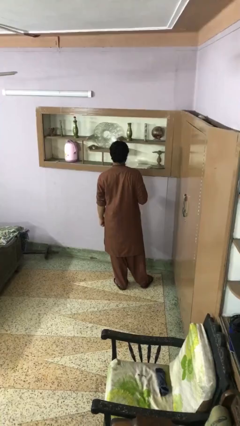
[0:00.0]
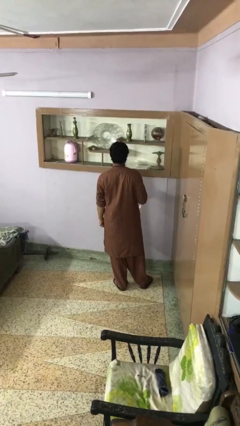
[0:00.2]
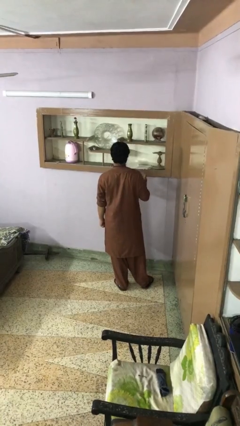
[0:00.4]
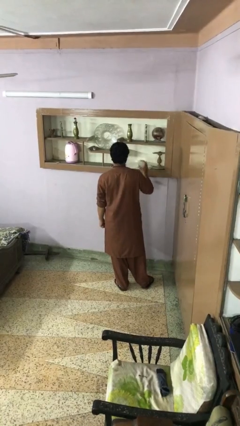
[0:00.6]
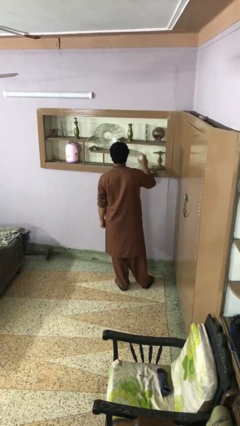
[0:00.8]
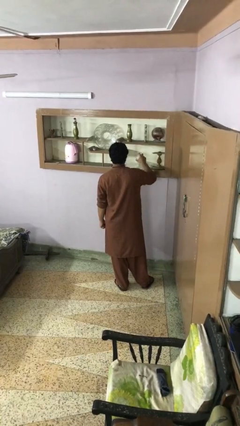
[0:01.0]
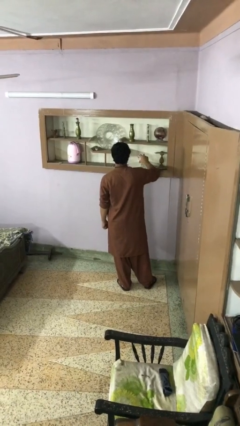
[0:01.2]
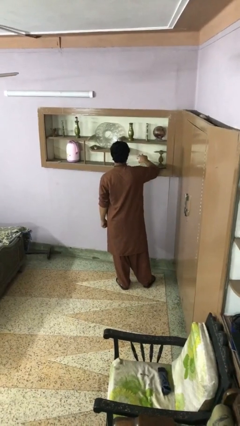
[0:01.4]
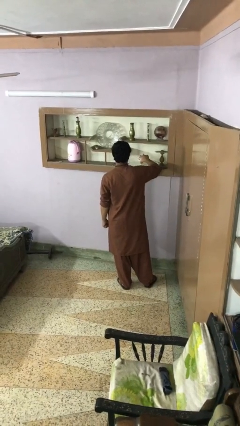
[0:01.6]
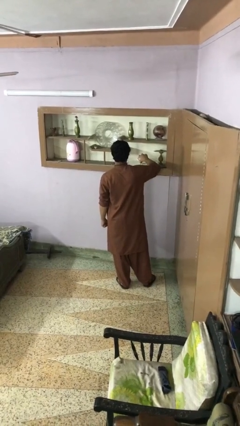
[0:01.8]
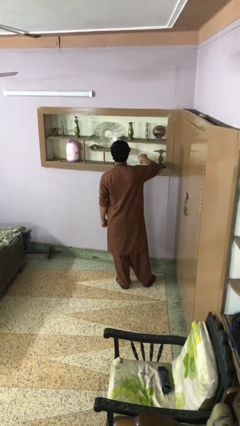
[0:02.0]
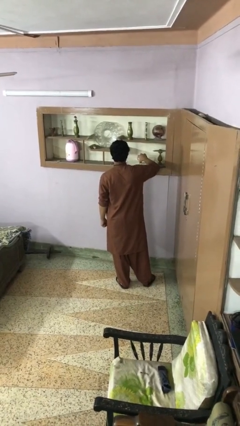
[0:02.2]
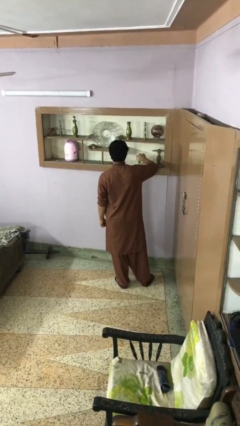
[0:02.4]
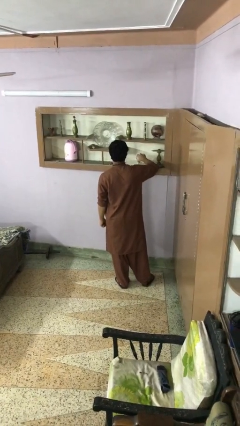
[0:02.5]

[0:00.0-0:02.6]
person pours into bowl

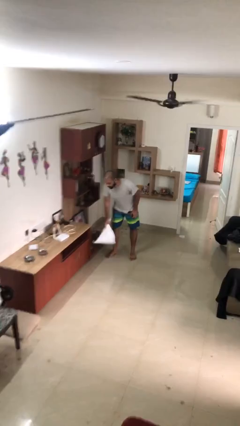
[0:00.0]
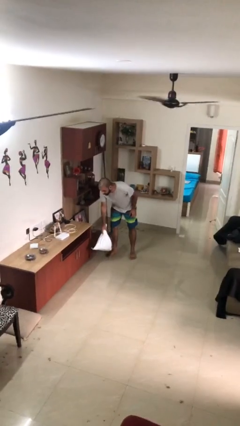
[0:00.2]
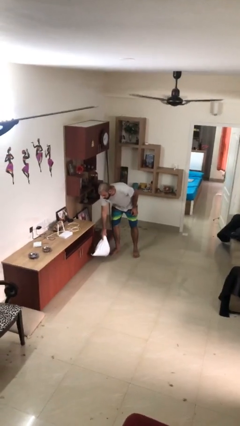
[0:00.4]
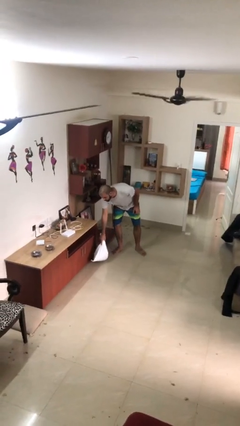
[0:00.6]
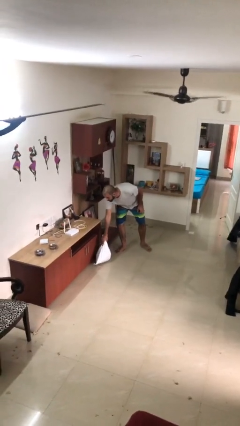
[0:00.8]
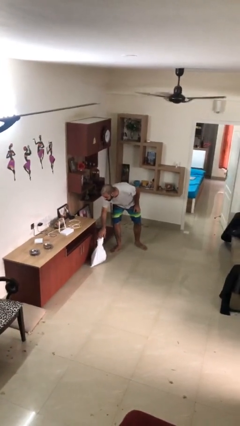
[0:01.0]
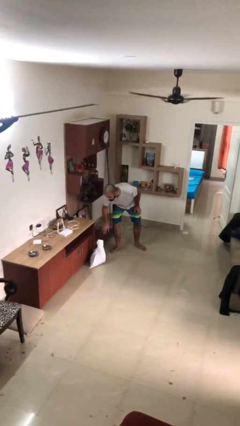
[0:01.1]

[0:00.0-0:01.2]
person puts down object on floor

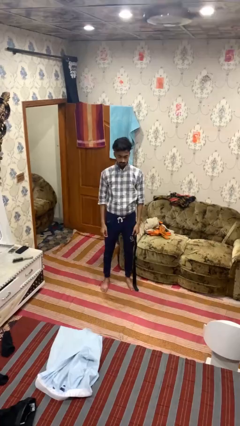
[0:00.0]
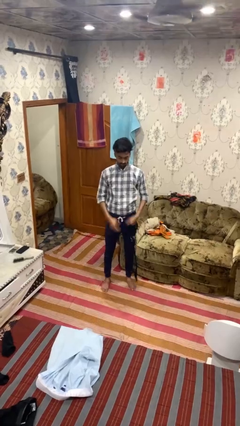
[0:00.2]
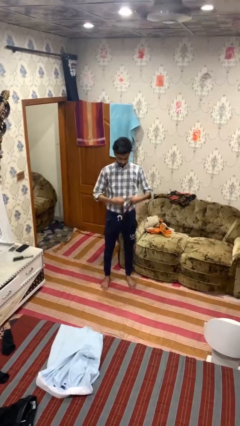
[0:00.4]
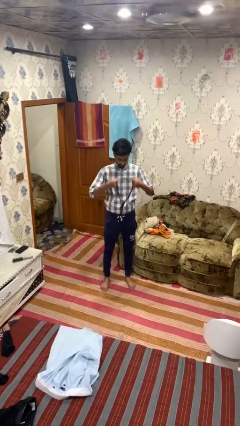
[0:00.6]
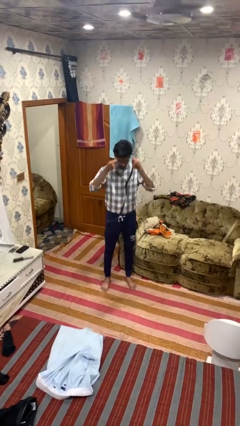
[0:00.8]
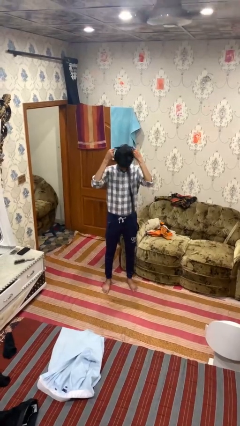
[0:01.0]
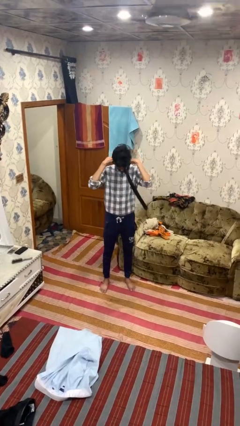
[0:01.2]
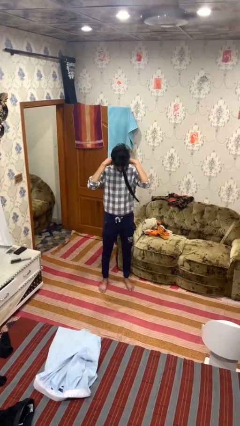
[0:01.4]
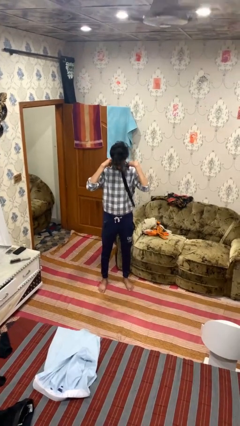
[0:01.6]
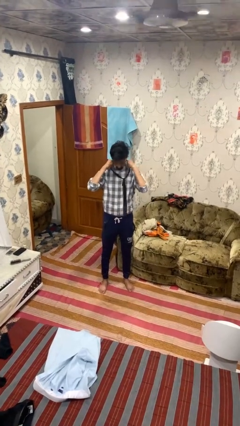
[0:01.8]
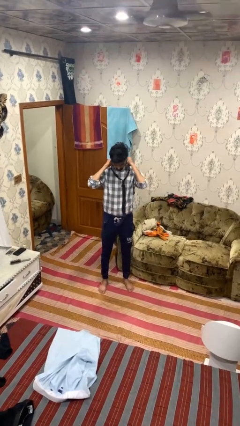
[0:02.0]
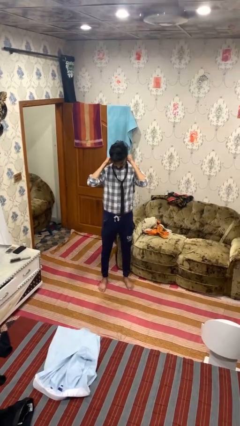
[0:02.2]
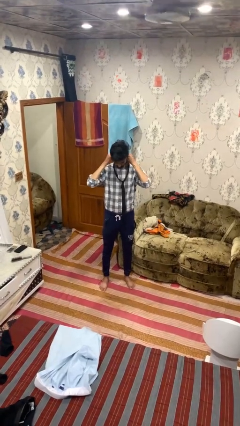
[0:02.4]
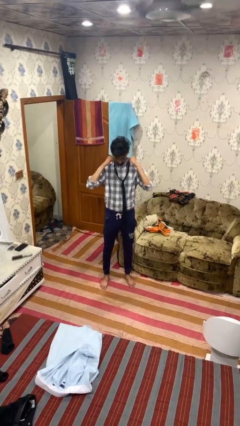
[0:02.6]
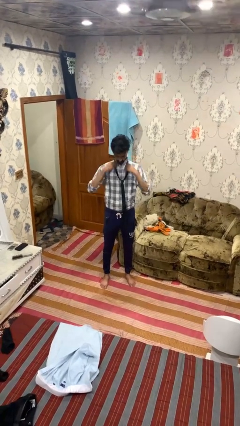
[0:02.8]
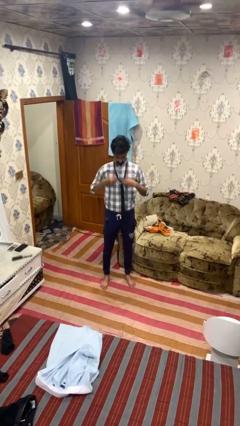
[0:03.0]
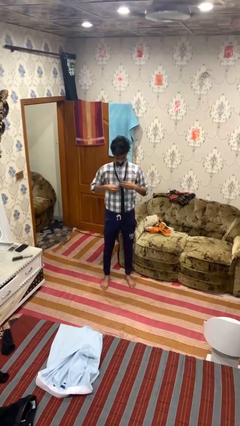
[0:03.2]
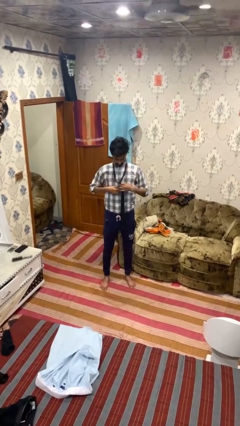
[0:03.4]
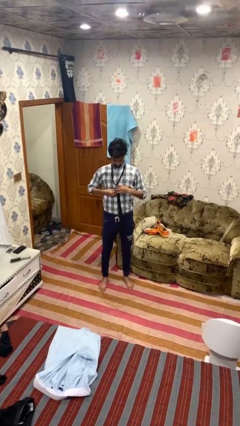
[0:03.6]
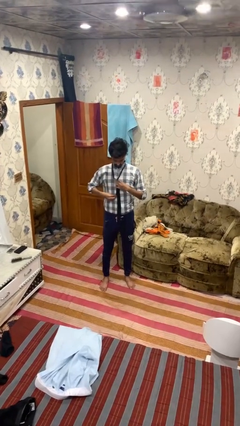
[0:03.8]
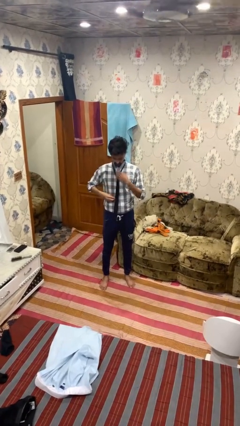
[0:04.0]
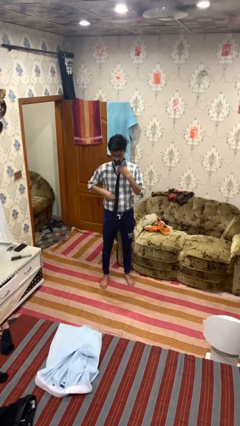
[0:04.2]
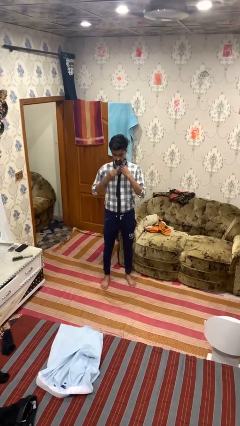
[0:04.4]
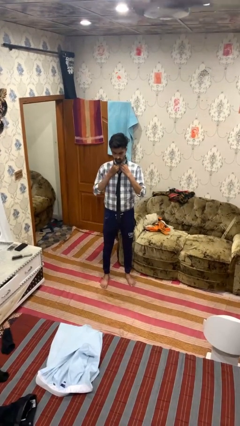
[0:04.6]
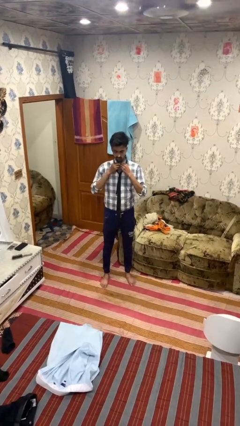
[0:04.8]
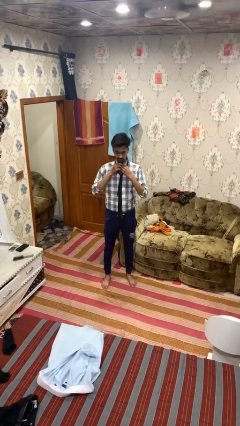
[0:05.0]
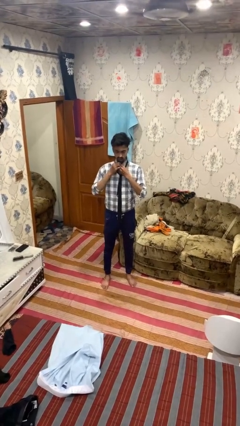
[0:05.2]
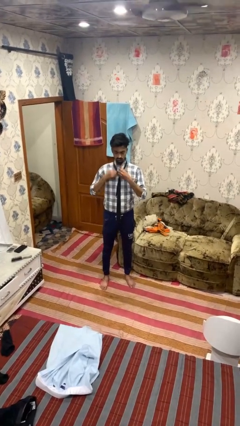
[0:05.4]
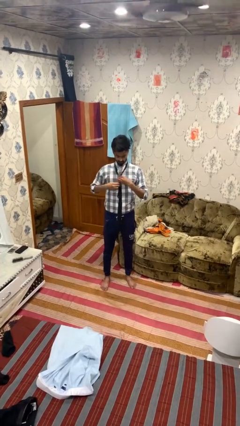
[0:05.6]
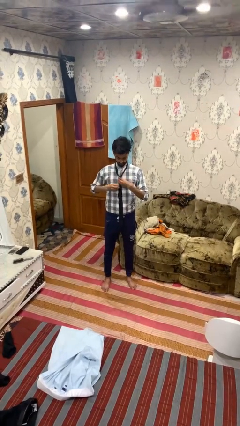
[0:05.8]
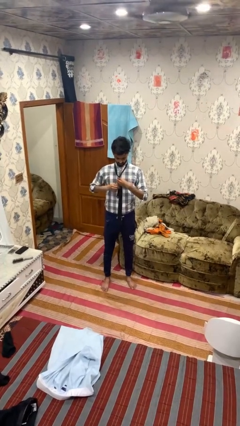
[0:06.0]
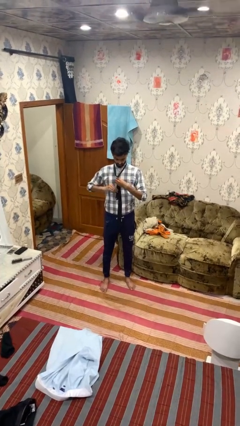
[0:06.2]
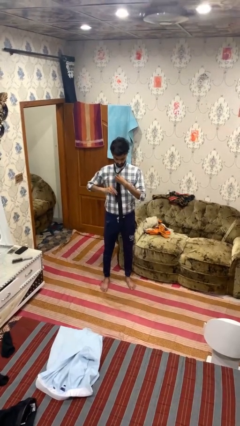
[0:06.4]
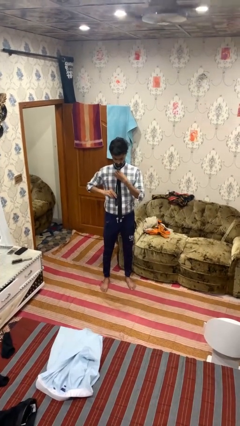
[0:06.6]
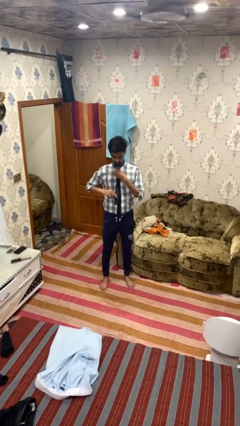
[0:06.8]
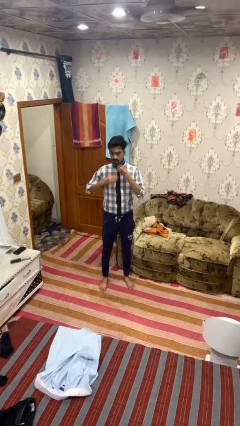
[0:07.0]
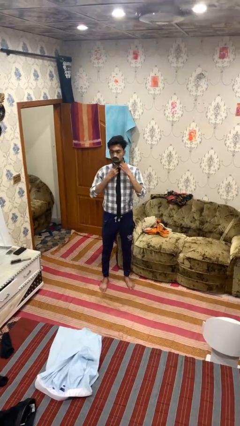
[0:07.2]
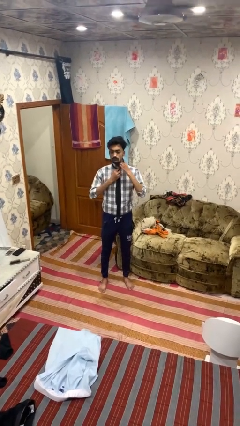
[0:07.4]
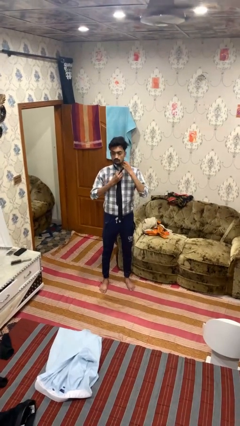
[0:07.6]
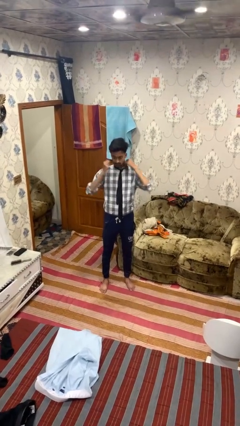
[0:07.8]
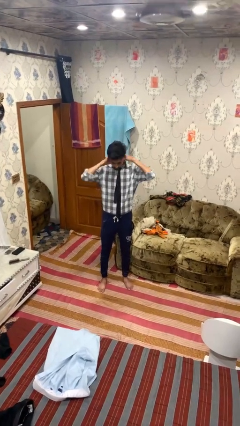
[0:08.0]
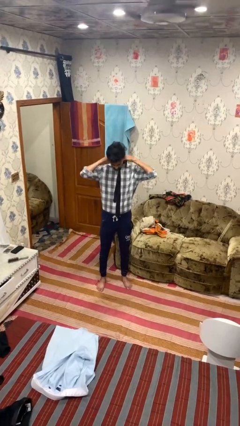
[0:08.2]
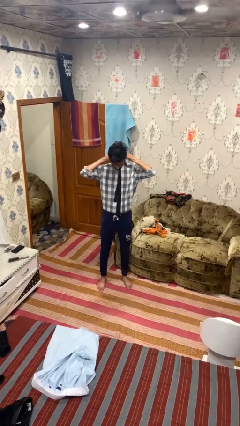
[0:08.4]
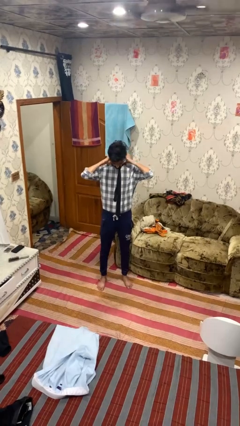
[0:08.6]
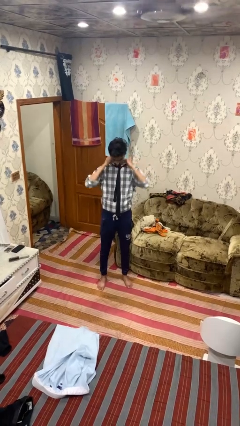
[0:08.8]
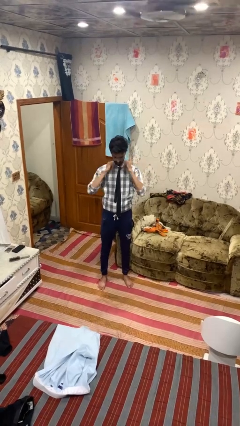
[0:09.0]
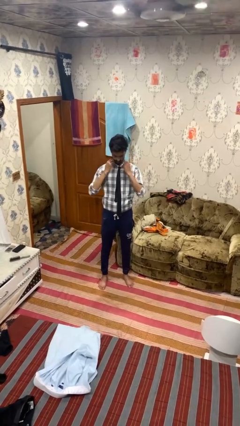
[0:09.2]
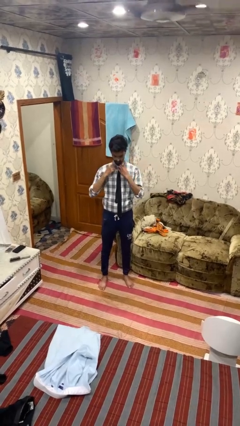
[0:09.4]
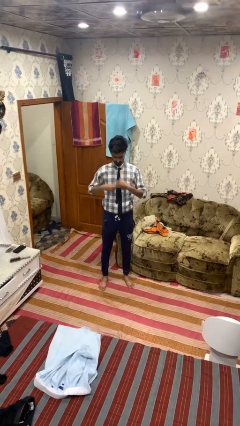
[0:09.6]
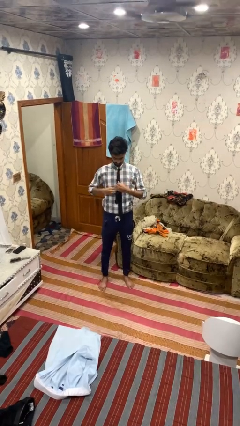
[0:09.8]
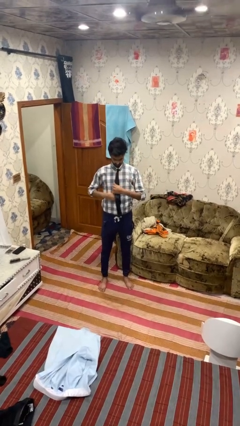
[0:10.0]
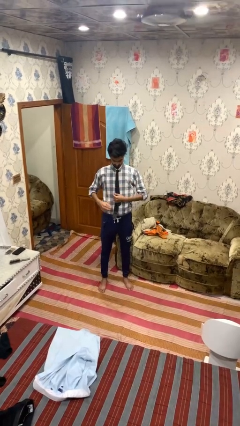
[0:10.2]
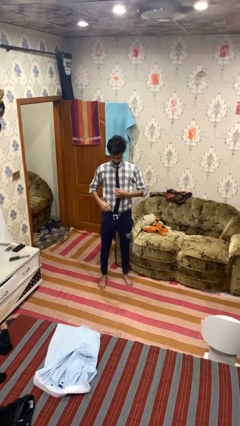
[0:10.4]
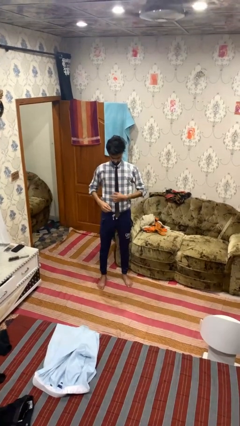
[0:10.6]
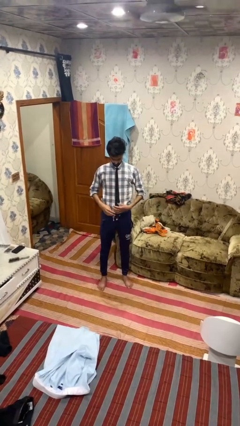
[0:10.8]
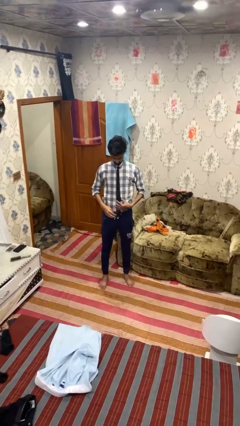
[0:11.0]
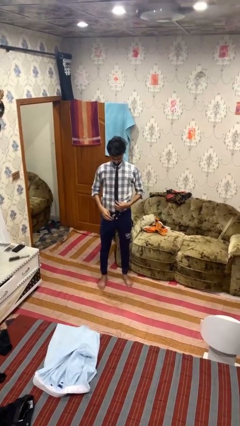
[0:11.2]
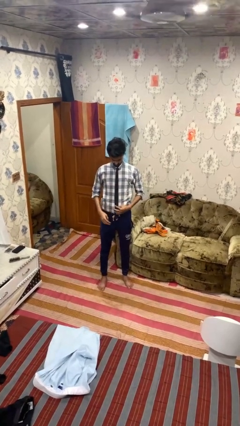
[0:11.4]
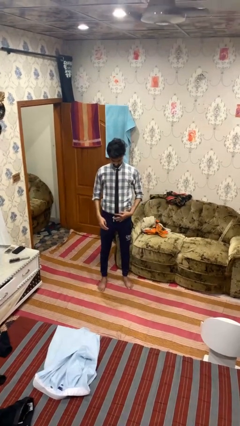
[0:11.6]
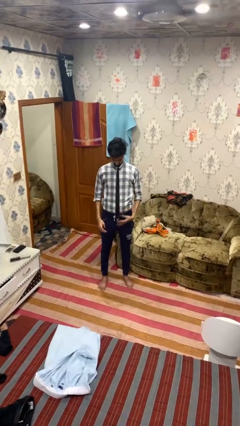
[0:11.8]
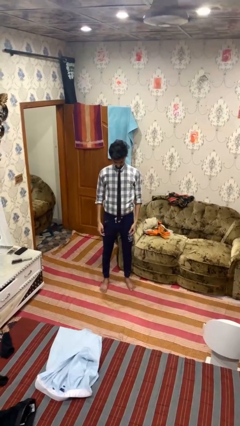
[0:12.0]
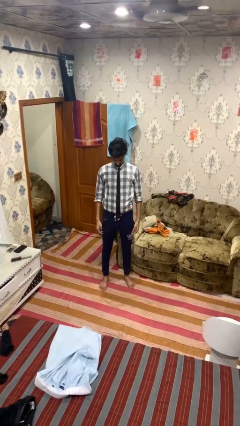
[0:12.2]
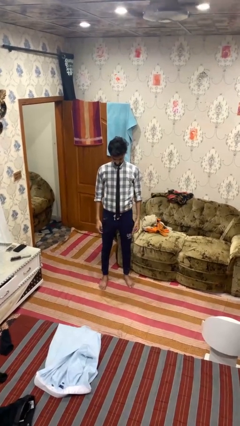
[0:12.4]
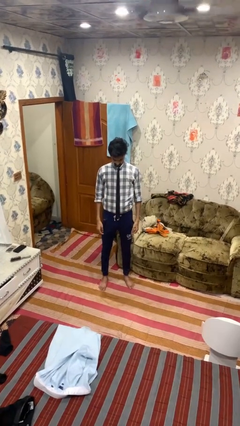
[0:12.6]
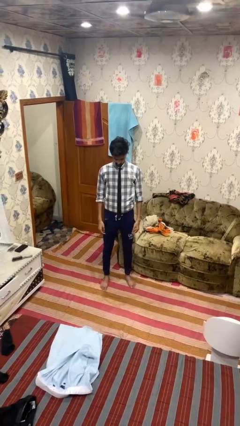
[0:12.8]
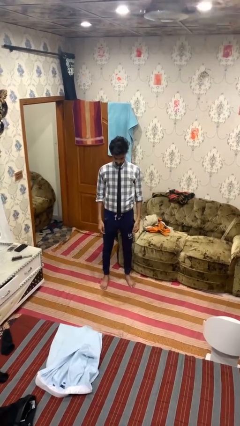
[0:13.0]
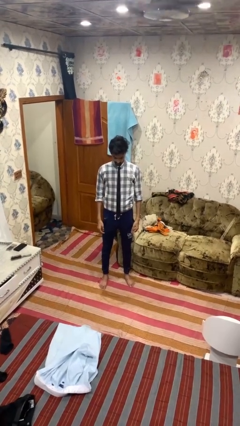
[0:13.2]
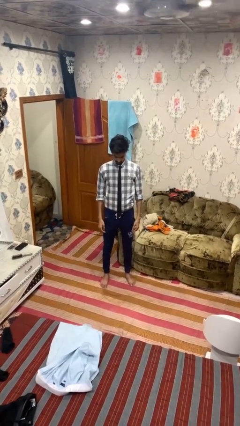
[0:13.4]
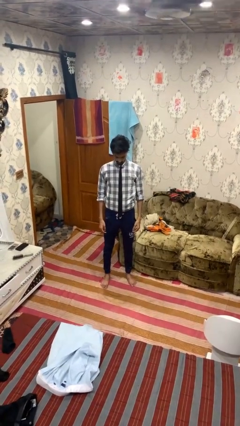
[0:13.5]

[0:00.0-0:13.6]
person puts on necktie

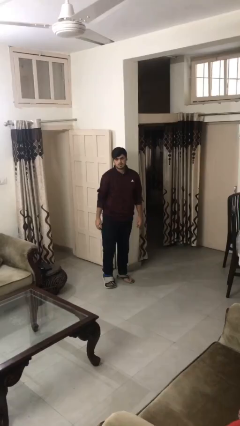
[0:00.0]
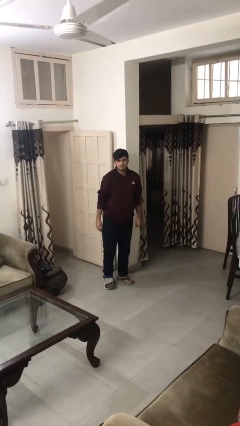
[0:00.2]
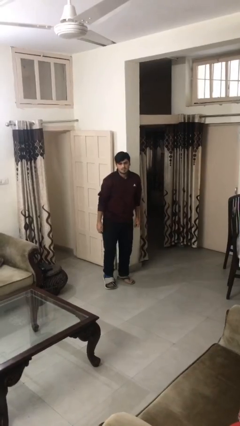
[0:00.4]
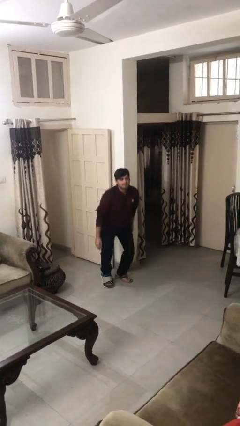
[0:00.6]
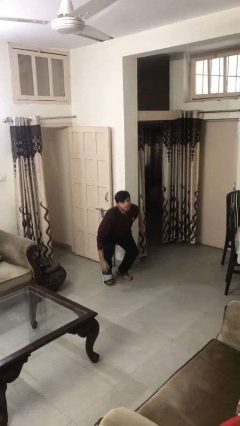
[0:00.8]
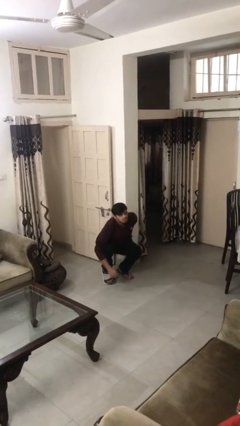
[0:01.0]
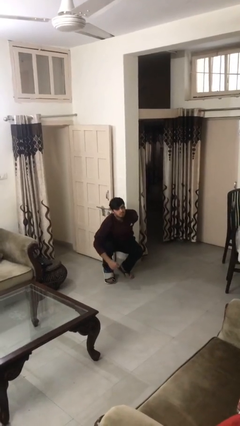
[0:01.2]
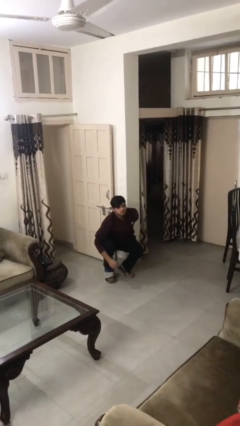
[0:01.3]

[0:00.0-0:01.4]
person sits down
